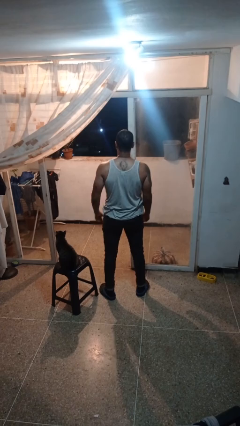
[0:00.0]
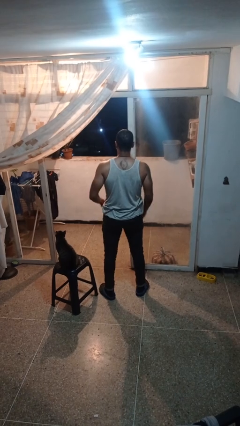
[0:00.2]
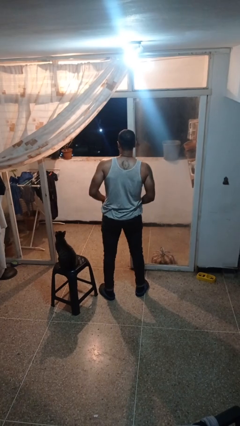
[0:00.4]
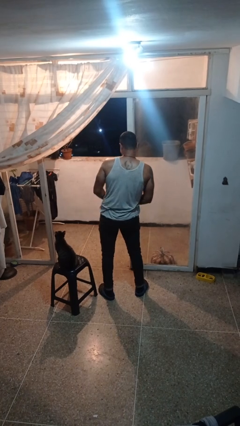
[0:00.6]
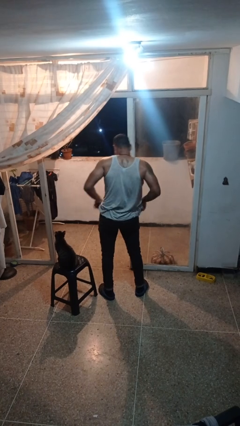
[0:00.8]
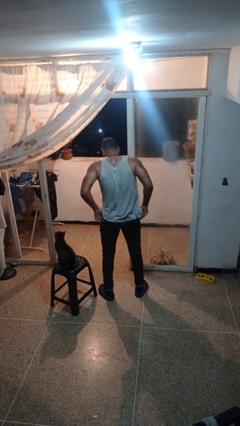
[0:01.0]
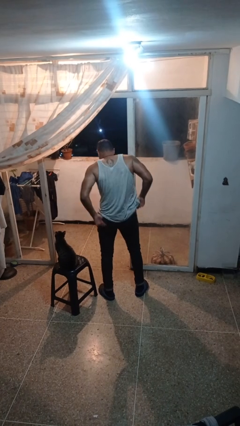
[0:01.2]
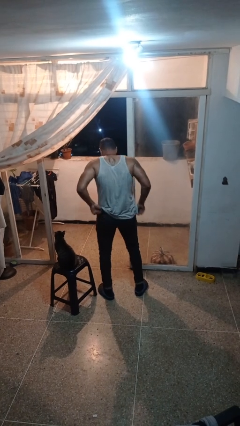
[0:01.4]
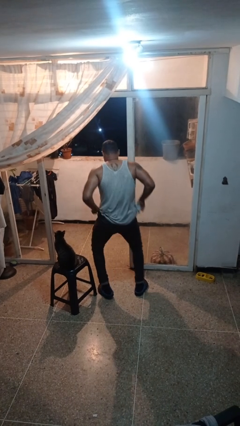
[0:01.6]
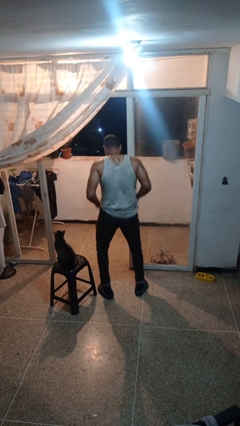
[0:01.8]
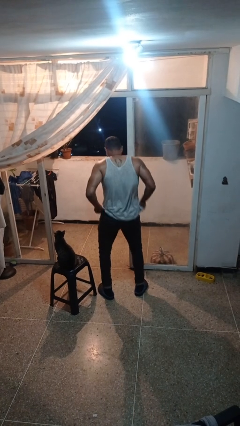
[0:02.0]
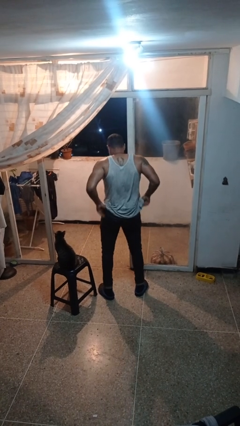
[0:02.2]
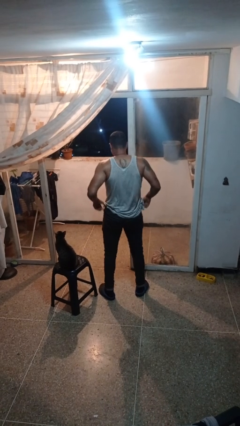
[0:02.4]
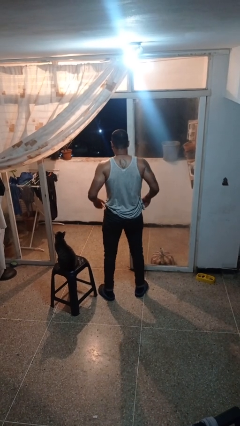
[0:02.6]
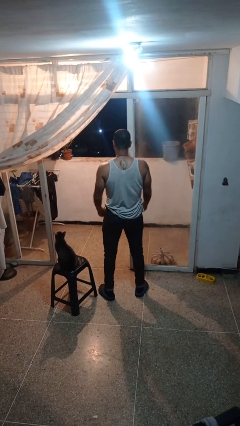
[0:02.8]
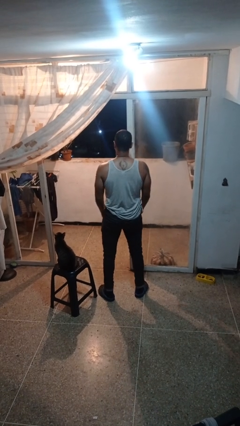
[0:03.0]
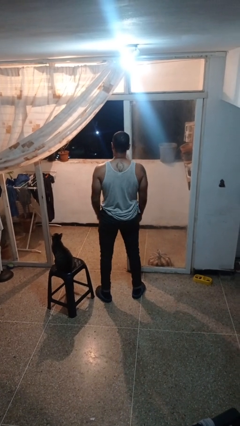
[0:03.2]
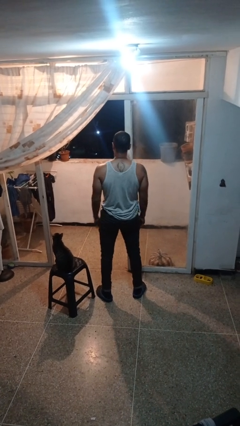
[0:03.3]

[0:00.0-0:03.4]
person hikes up pants

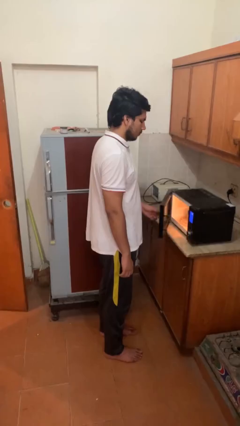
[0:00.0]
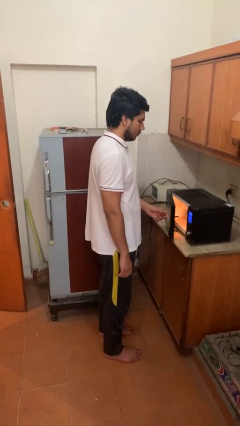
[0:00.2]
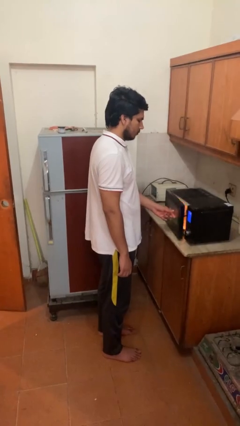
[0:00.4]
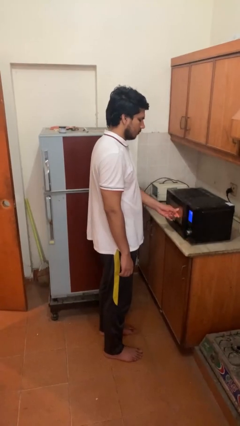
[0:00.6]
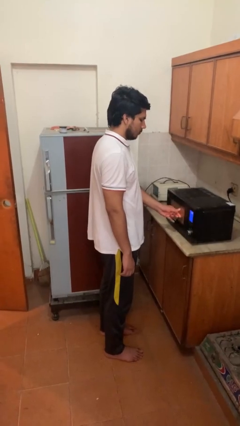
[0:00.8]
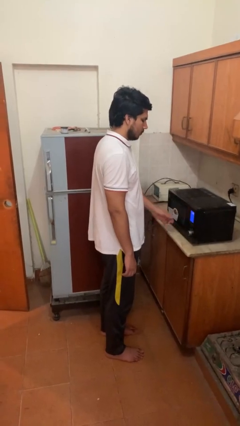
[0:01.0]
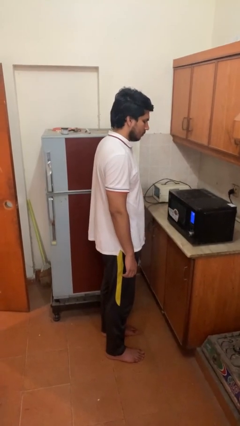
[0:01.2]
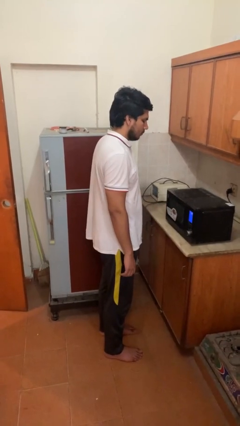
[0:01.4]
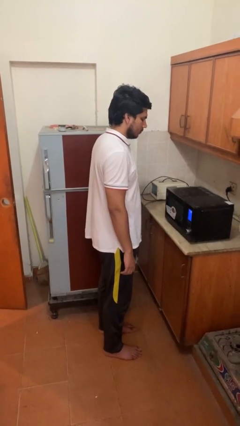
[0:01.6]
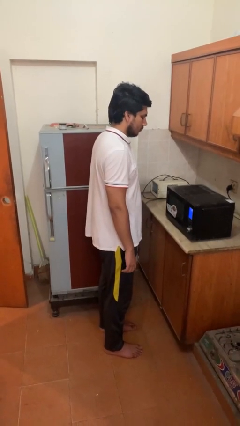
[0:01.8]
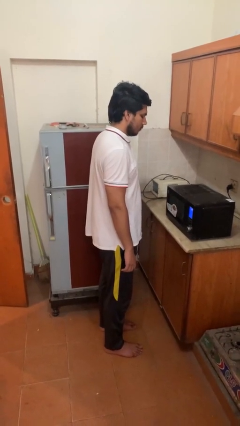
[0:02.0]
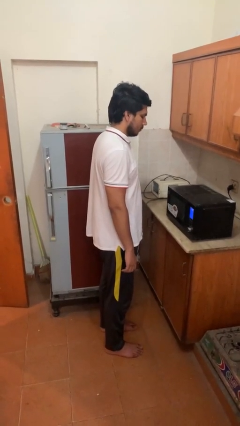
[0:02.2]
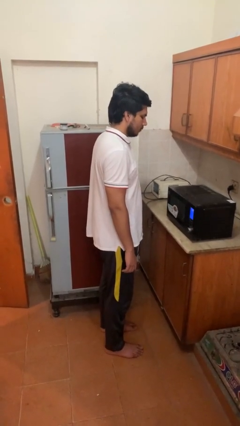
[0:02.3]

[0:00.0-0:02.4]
person closes microwave

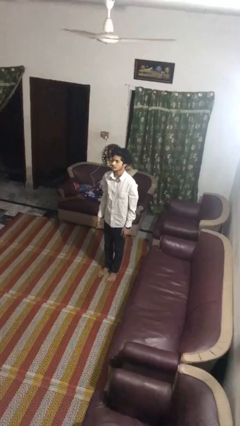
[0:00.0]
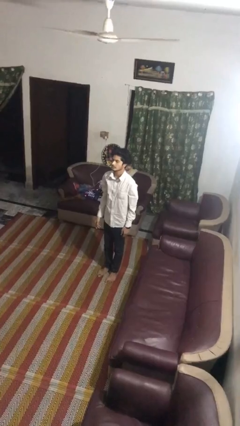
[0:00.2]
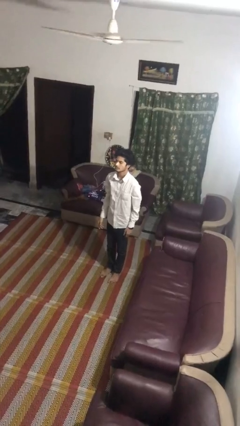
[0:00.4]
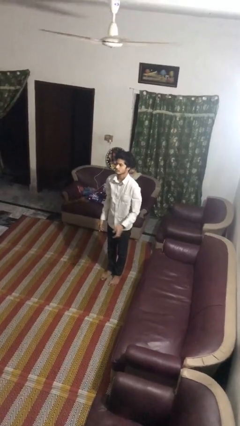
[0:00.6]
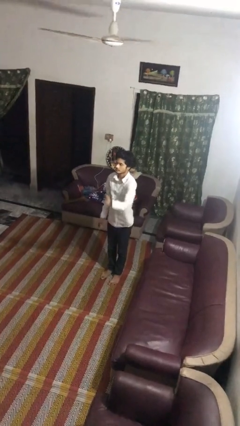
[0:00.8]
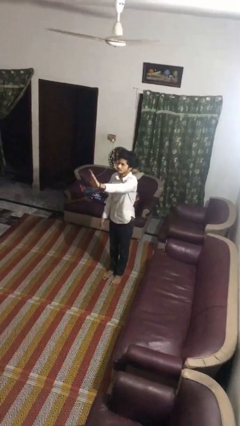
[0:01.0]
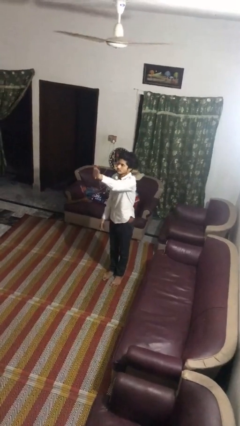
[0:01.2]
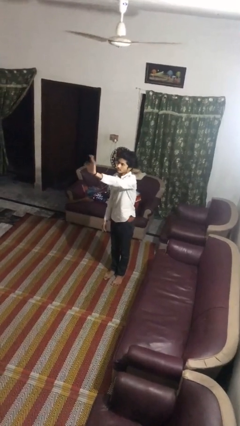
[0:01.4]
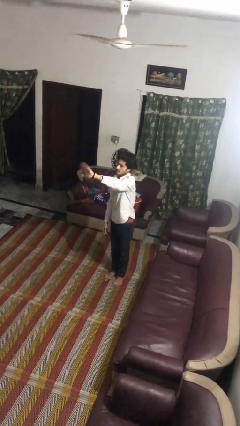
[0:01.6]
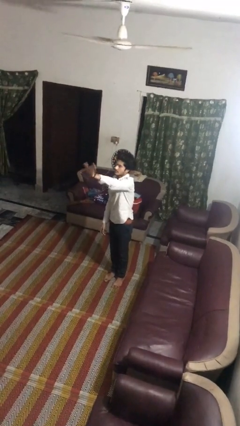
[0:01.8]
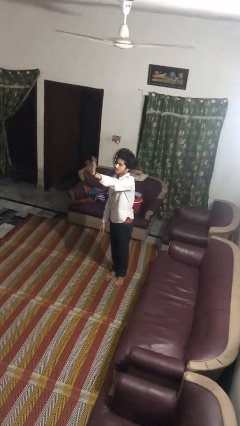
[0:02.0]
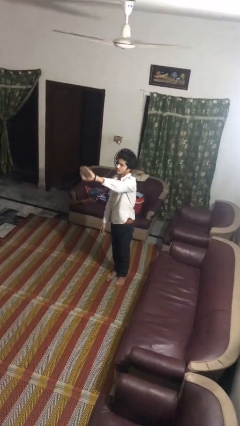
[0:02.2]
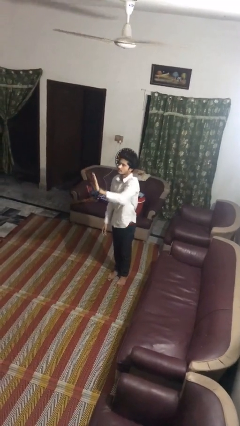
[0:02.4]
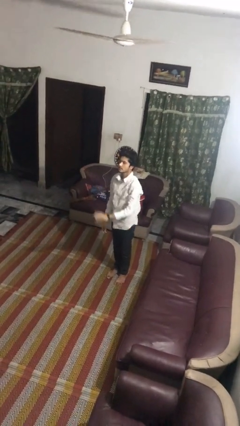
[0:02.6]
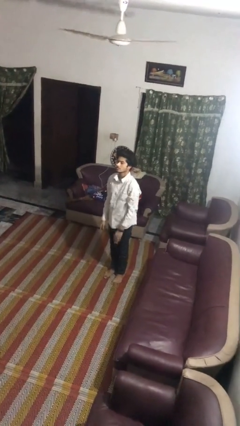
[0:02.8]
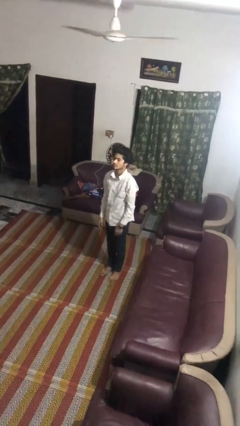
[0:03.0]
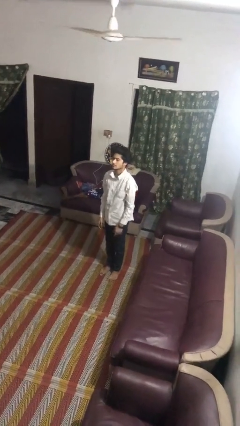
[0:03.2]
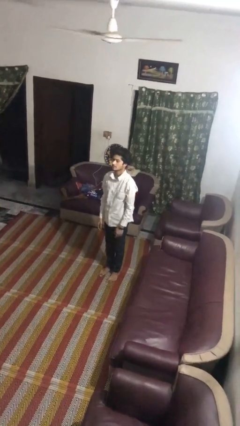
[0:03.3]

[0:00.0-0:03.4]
person waves at person

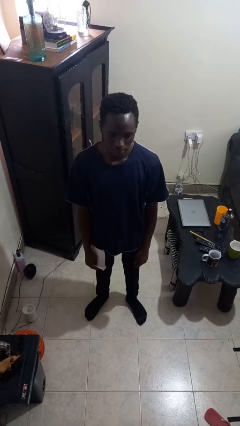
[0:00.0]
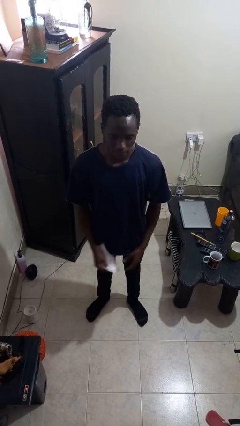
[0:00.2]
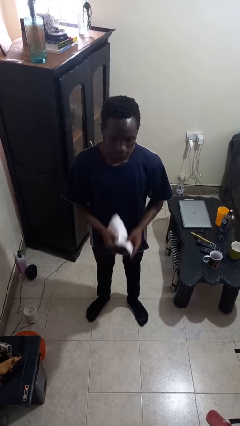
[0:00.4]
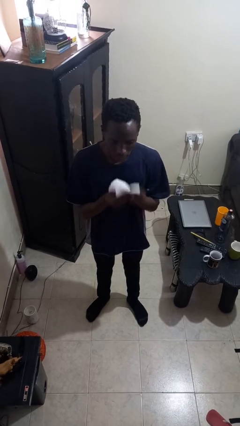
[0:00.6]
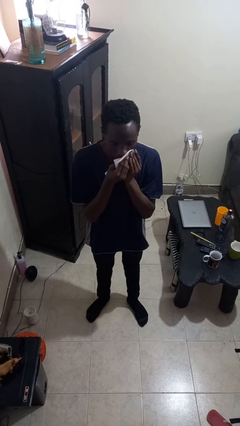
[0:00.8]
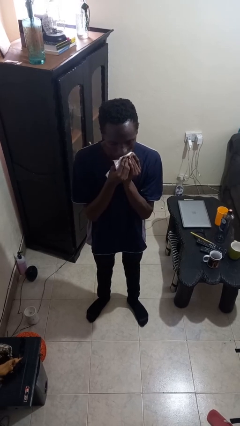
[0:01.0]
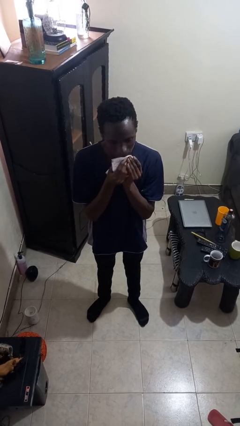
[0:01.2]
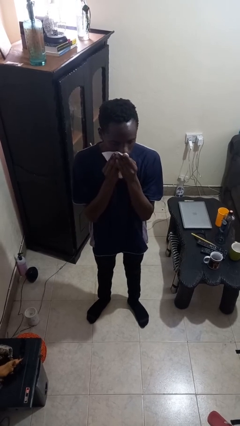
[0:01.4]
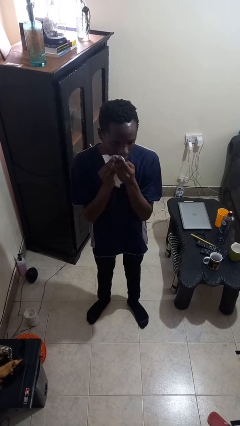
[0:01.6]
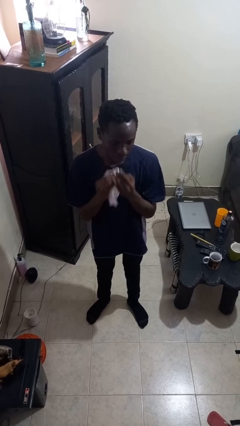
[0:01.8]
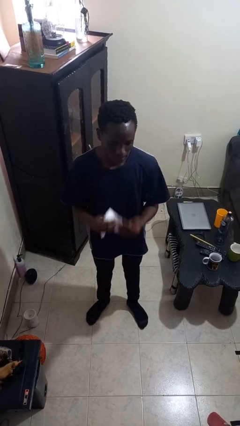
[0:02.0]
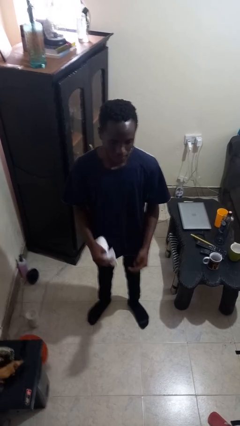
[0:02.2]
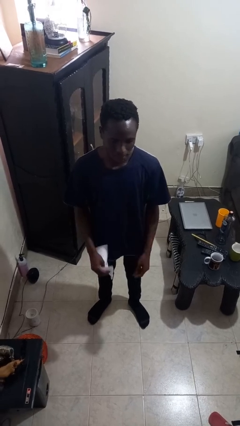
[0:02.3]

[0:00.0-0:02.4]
person wipes mouth with napkin

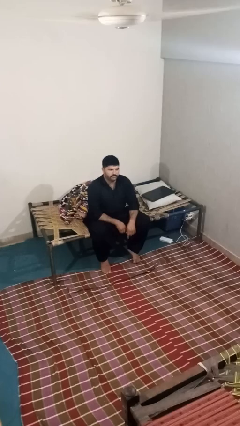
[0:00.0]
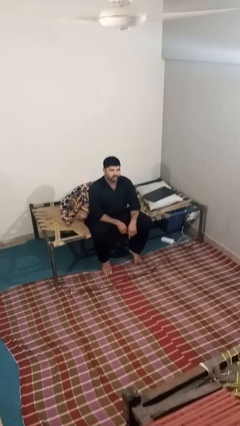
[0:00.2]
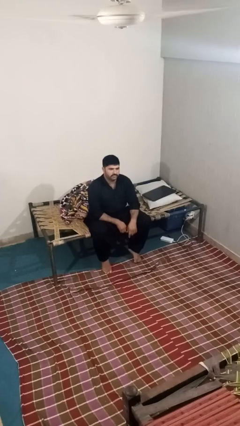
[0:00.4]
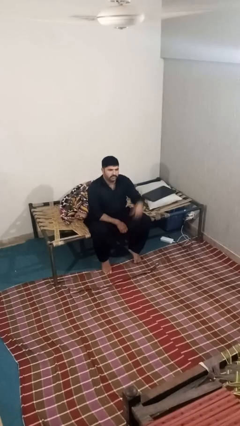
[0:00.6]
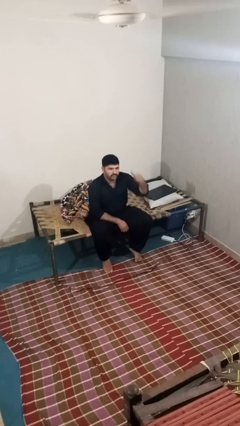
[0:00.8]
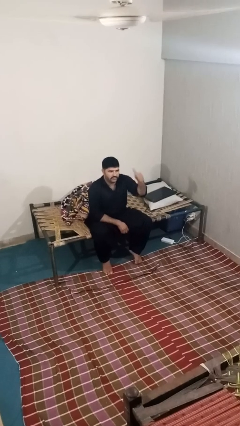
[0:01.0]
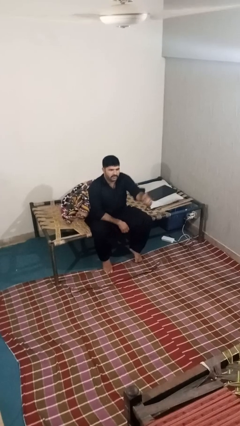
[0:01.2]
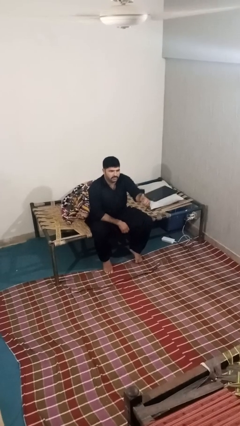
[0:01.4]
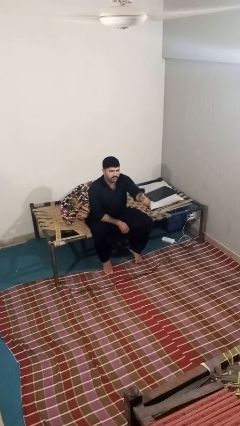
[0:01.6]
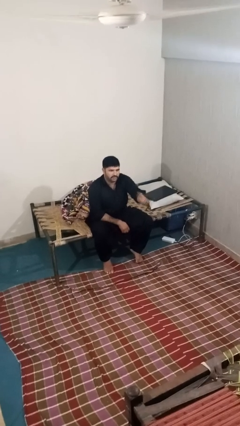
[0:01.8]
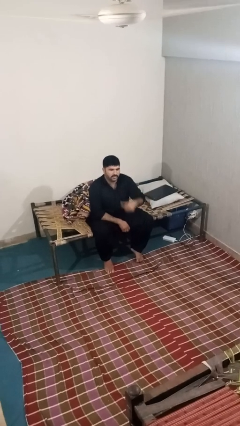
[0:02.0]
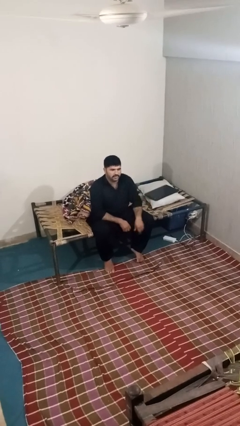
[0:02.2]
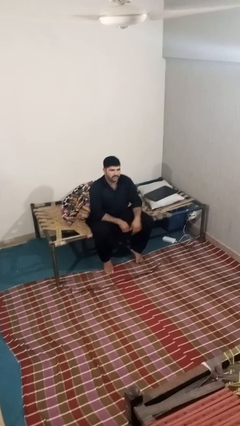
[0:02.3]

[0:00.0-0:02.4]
person gestures thumbs up

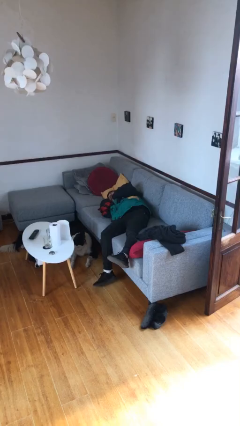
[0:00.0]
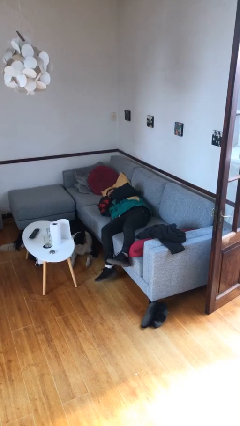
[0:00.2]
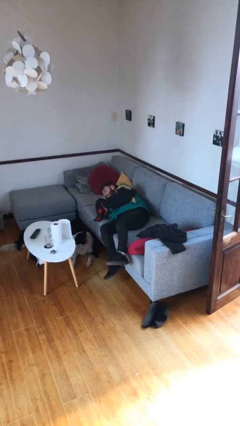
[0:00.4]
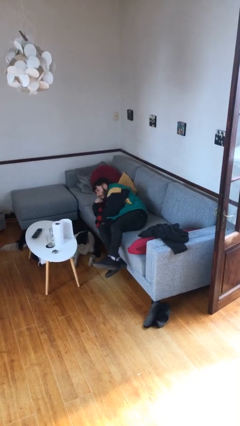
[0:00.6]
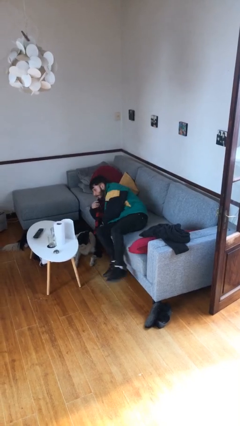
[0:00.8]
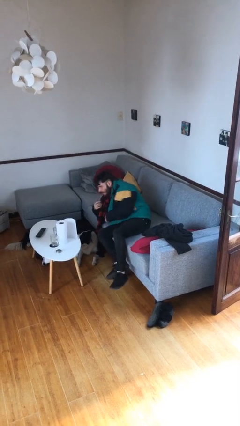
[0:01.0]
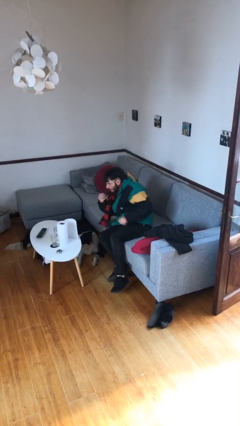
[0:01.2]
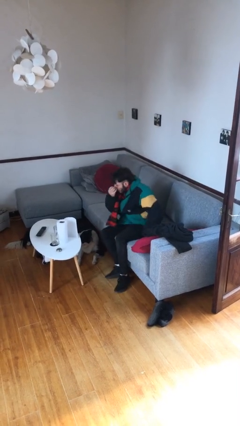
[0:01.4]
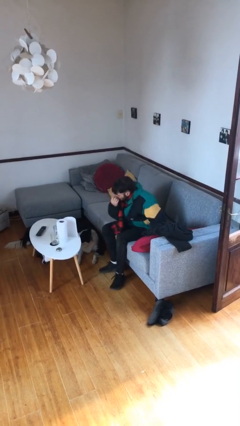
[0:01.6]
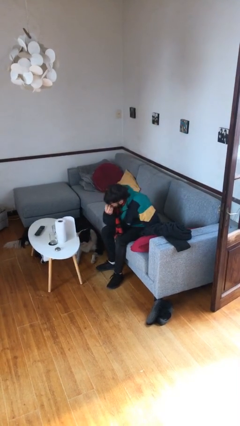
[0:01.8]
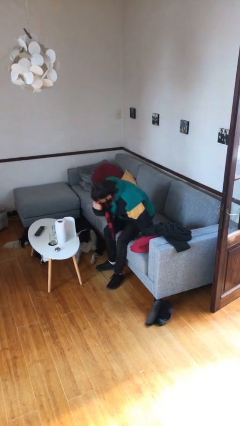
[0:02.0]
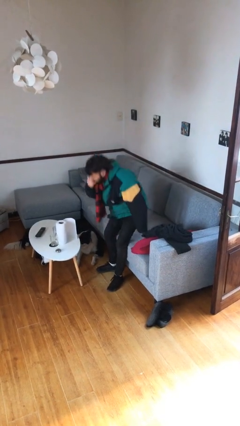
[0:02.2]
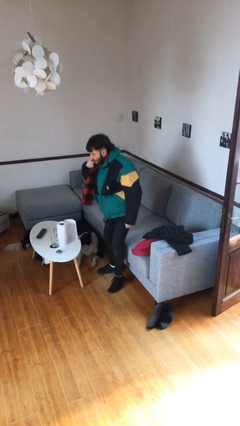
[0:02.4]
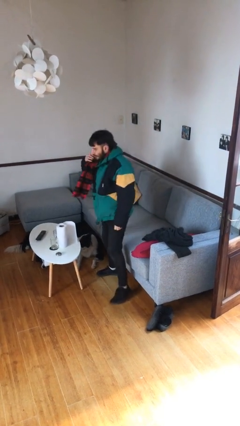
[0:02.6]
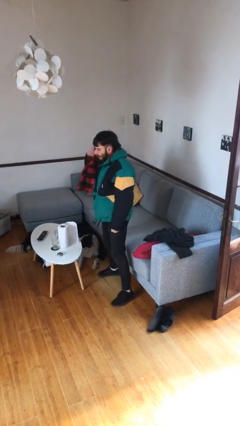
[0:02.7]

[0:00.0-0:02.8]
person stands up

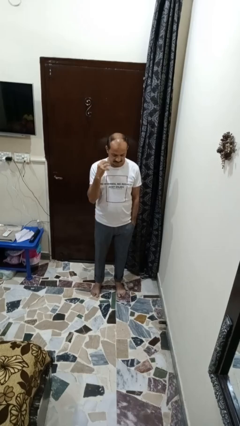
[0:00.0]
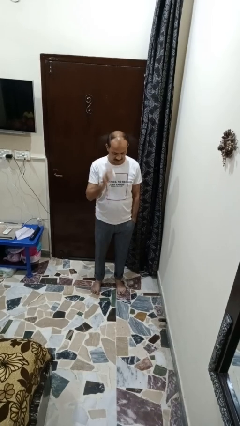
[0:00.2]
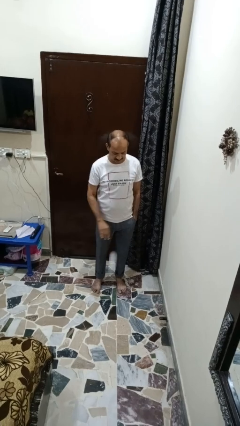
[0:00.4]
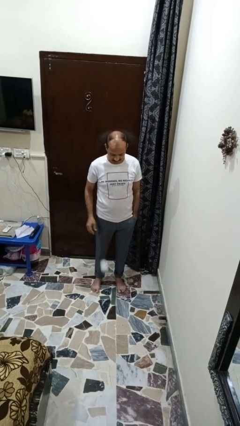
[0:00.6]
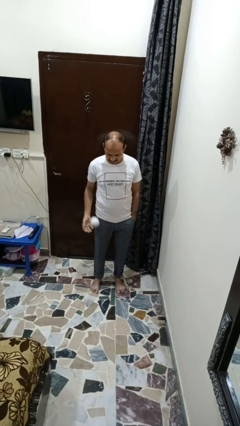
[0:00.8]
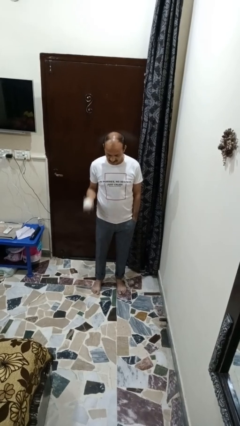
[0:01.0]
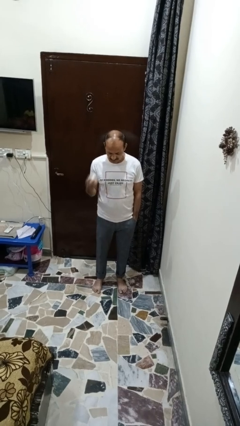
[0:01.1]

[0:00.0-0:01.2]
person bounces ball on floor
